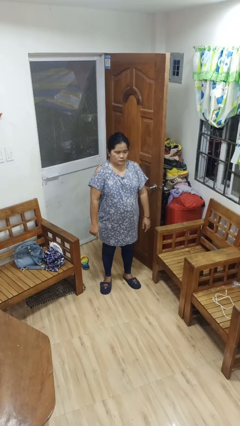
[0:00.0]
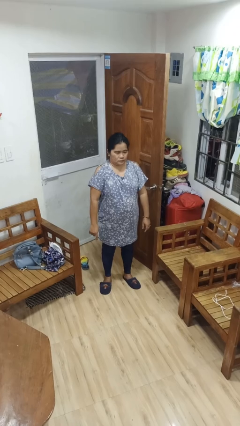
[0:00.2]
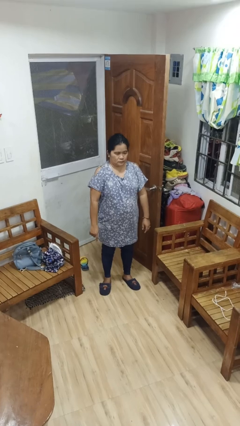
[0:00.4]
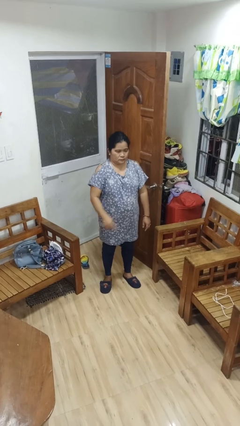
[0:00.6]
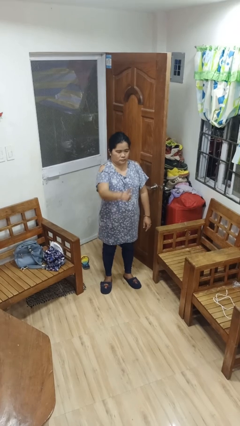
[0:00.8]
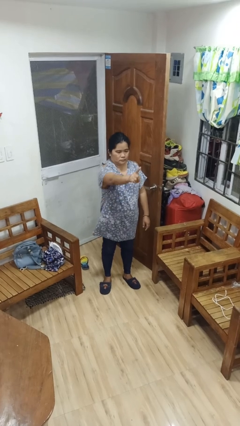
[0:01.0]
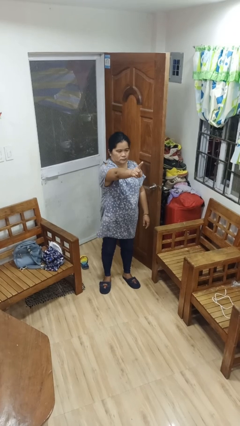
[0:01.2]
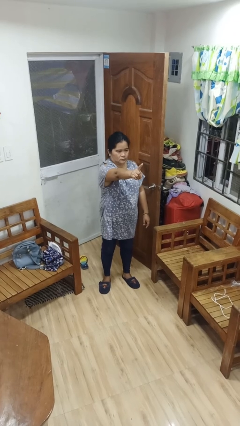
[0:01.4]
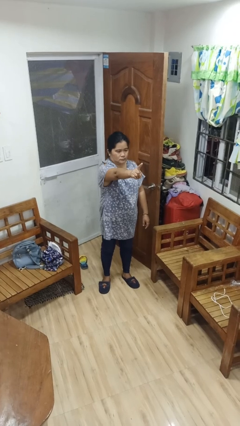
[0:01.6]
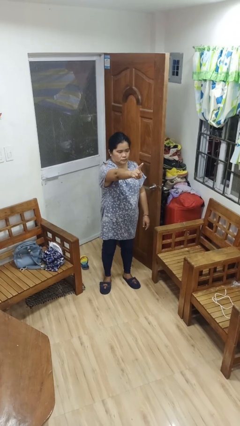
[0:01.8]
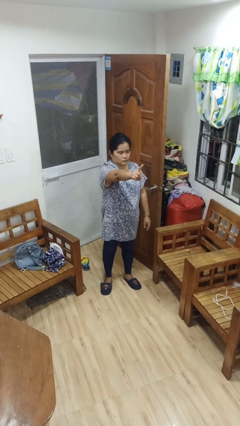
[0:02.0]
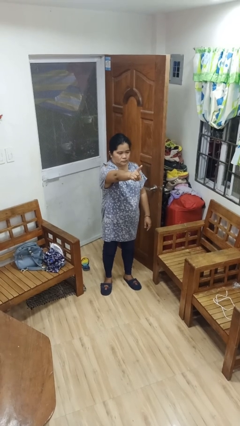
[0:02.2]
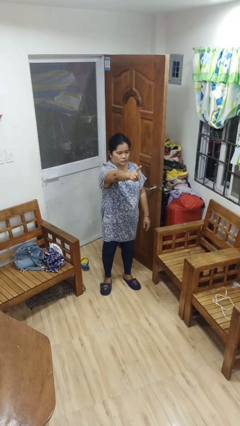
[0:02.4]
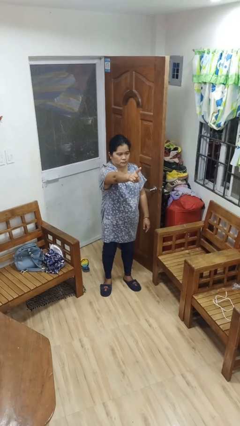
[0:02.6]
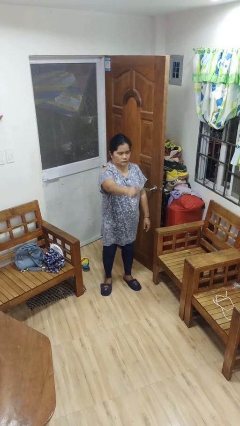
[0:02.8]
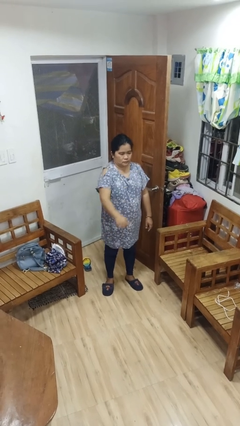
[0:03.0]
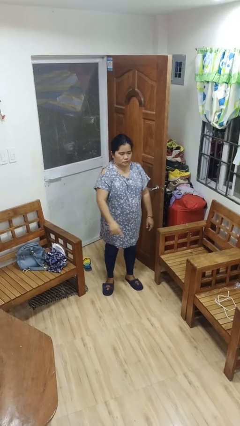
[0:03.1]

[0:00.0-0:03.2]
person gestures number one

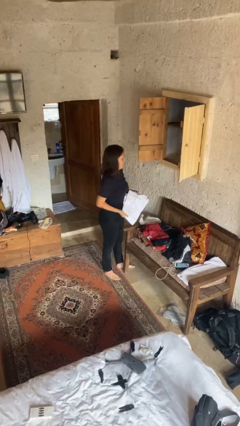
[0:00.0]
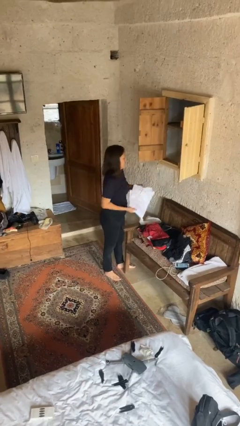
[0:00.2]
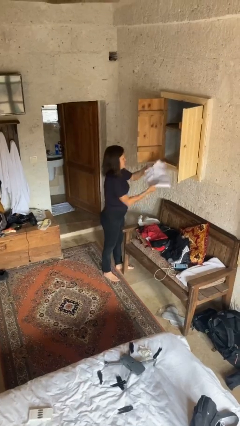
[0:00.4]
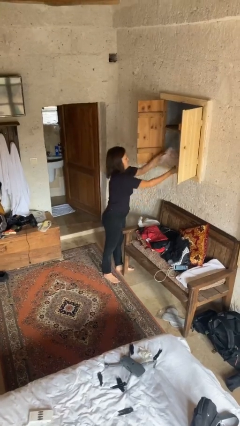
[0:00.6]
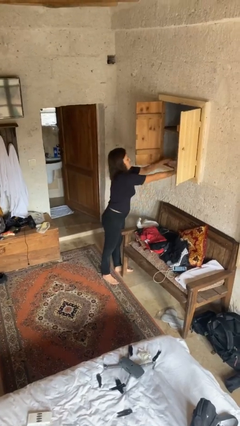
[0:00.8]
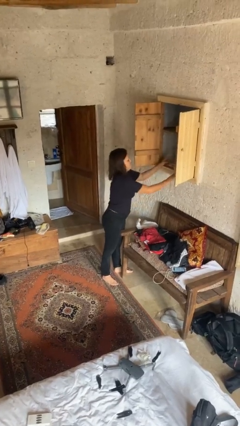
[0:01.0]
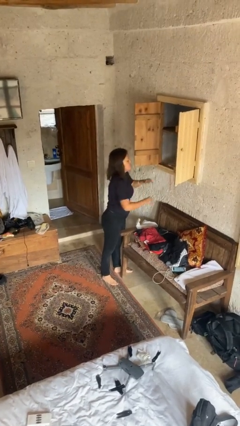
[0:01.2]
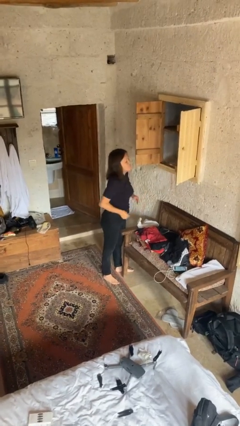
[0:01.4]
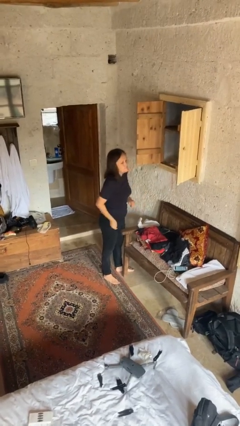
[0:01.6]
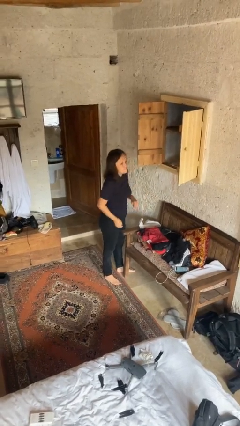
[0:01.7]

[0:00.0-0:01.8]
person puts clothes into dresser

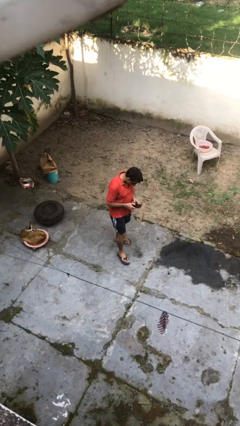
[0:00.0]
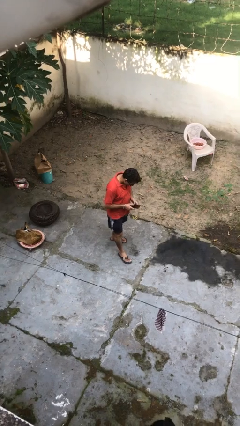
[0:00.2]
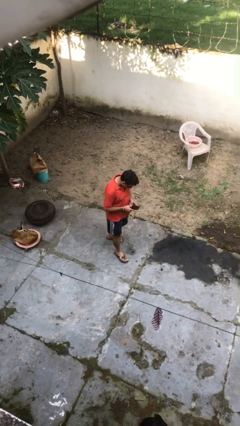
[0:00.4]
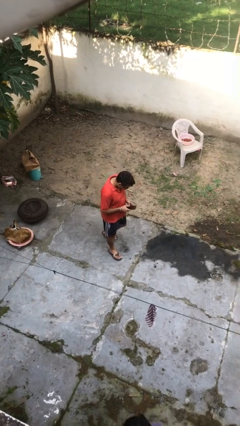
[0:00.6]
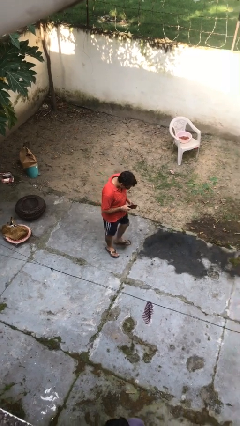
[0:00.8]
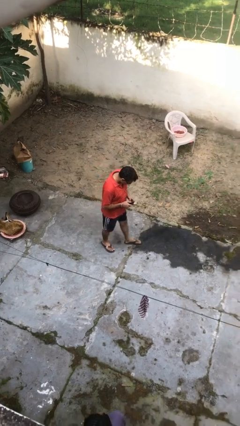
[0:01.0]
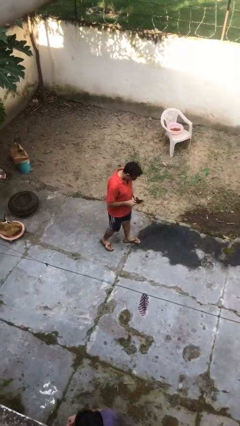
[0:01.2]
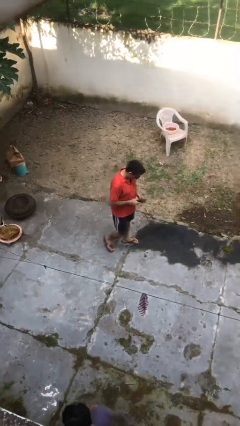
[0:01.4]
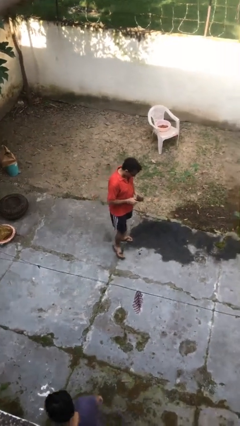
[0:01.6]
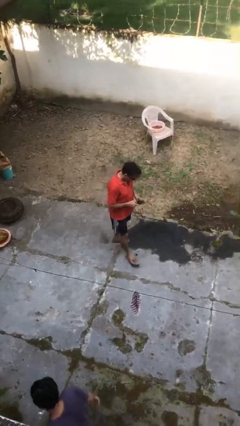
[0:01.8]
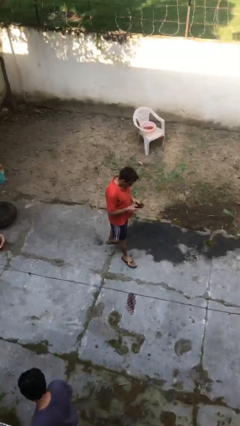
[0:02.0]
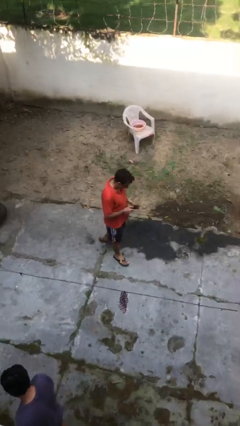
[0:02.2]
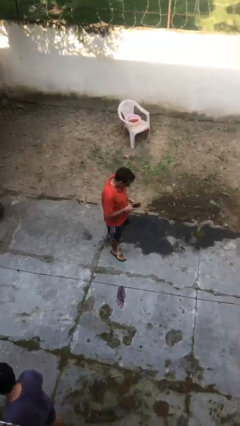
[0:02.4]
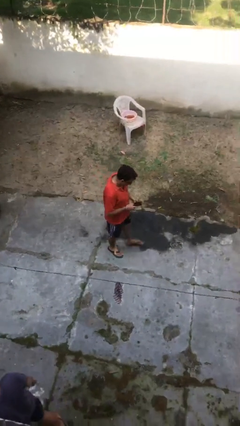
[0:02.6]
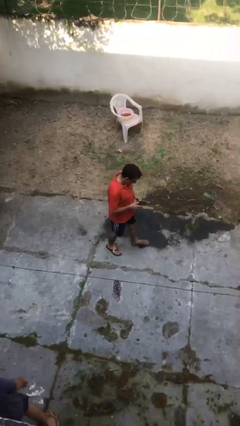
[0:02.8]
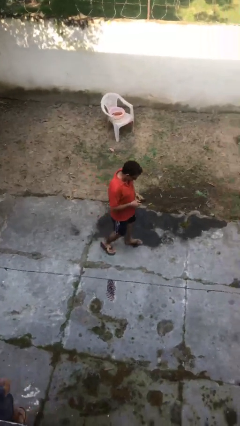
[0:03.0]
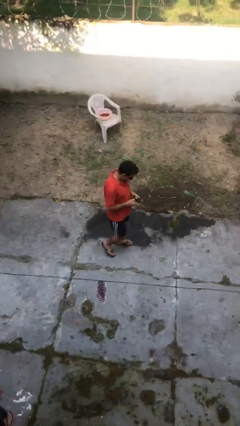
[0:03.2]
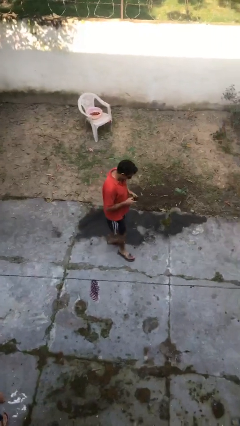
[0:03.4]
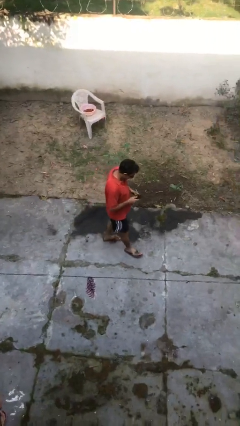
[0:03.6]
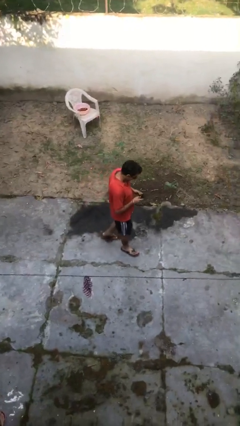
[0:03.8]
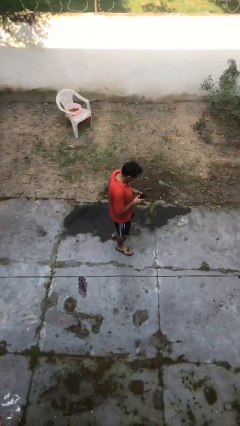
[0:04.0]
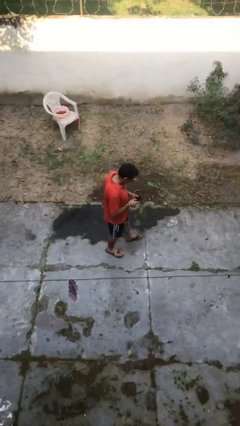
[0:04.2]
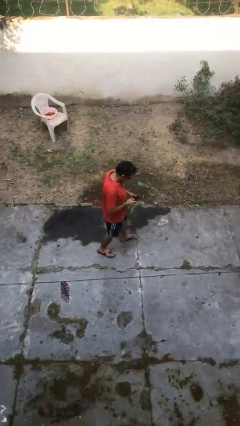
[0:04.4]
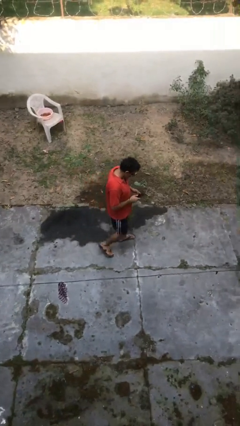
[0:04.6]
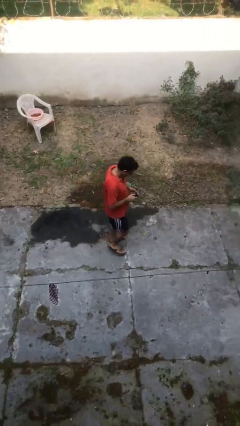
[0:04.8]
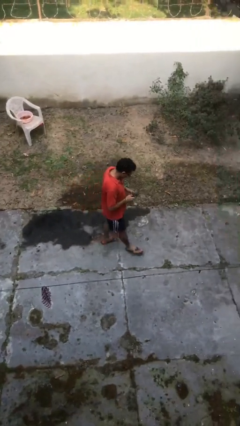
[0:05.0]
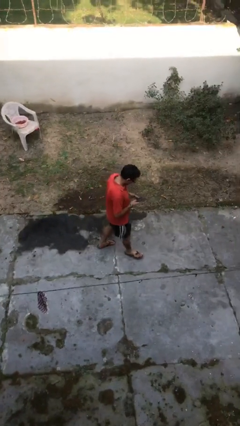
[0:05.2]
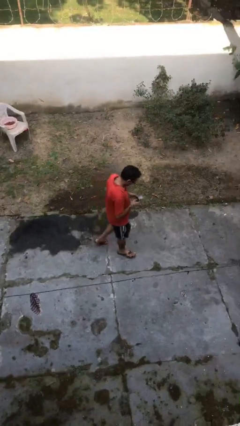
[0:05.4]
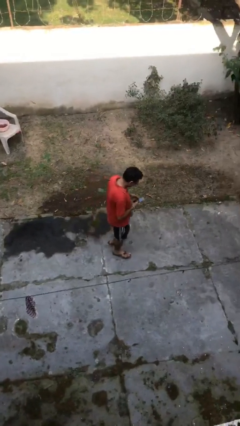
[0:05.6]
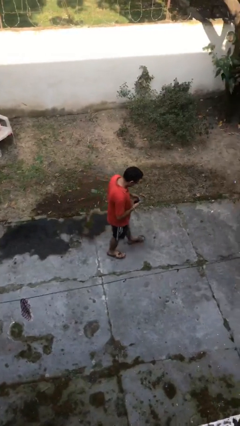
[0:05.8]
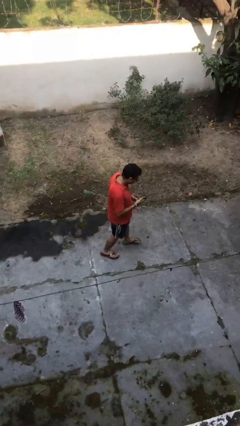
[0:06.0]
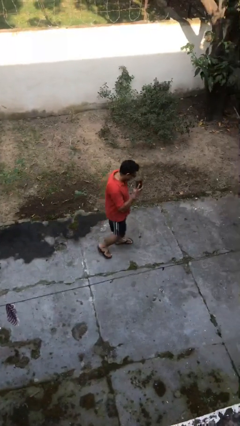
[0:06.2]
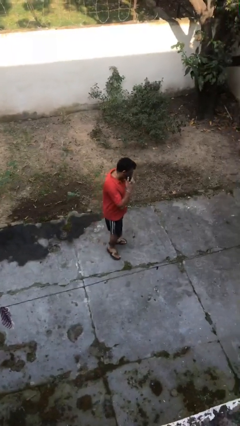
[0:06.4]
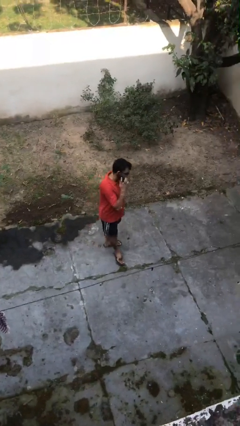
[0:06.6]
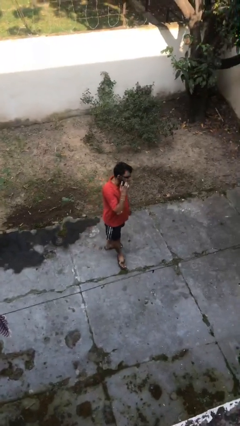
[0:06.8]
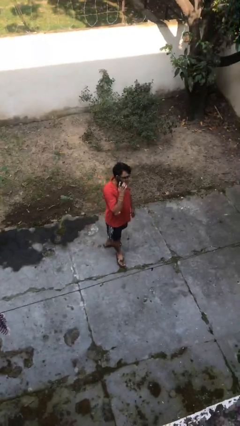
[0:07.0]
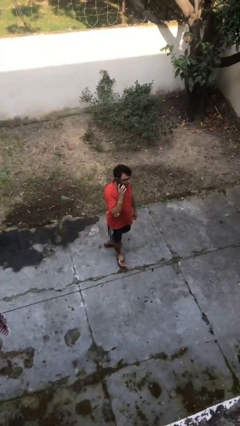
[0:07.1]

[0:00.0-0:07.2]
person texts on phone

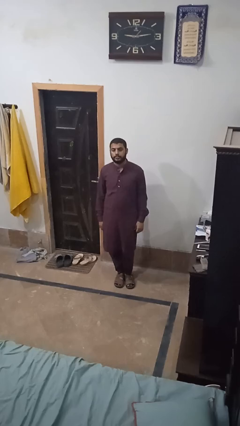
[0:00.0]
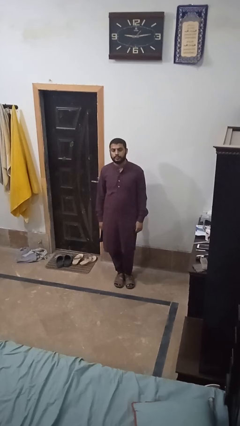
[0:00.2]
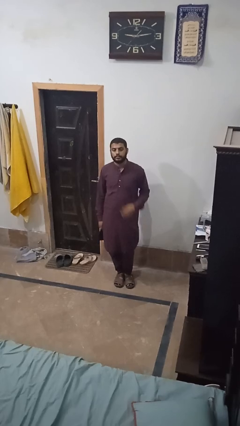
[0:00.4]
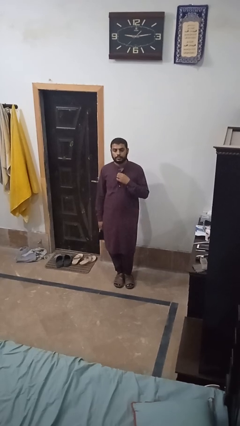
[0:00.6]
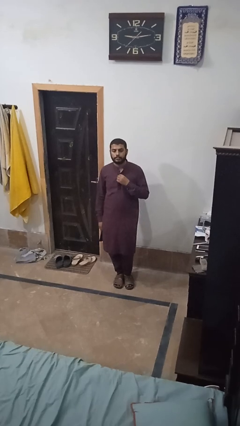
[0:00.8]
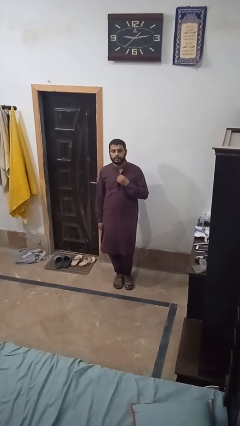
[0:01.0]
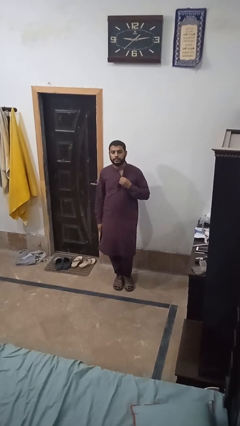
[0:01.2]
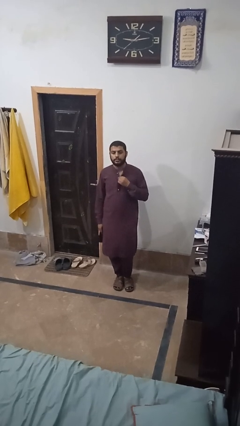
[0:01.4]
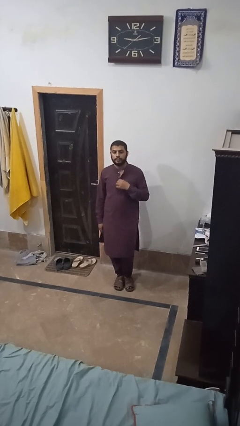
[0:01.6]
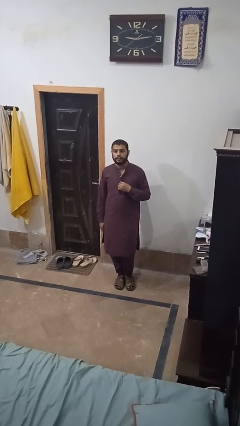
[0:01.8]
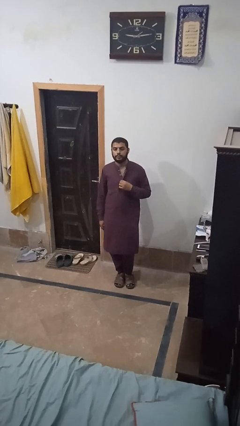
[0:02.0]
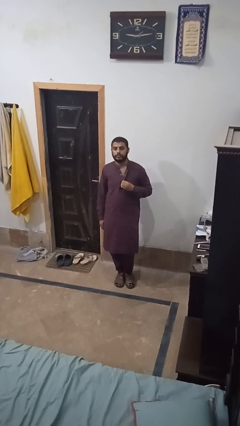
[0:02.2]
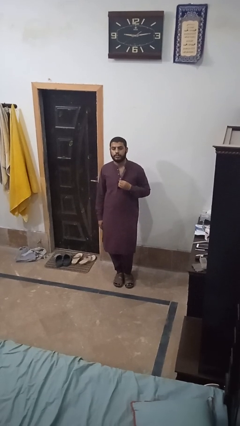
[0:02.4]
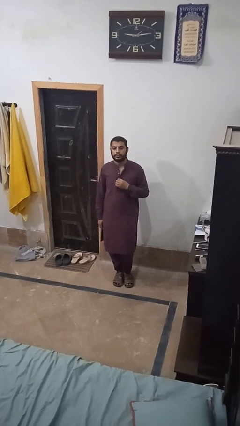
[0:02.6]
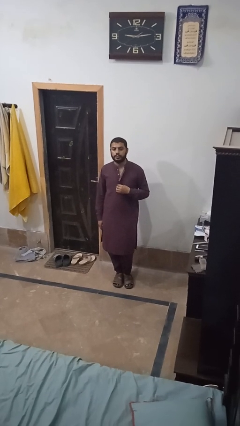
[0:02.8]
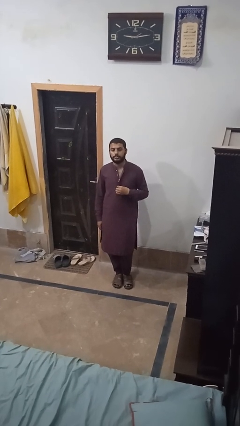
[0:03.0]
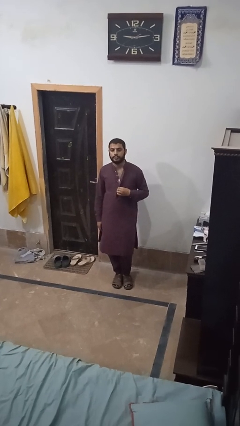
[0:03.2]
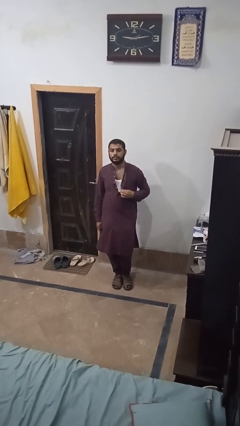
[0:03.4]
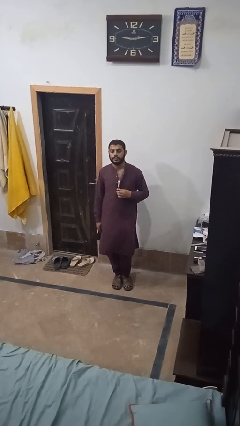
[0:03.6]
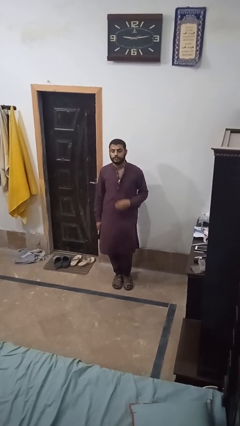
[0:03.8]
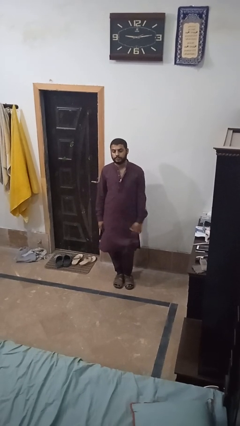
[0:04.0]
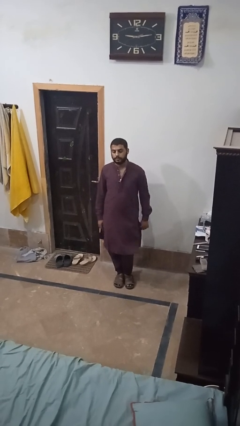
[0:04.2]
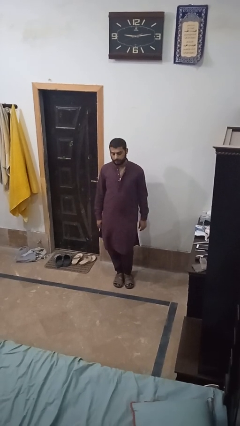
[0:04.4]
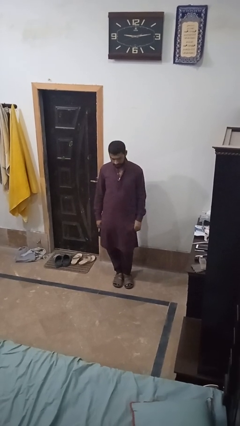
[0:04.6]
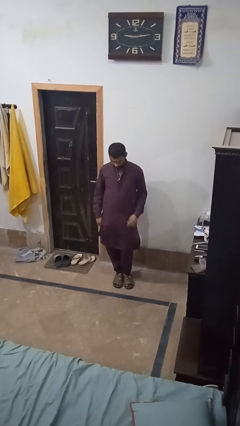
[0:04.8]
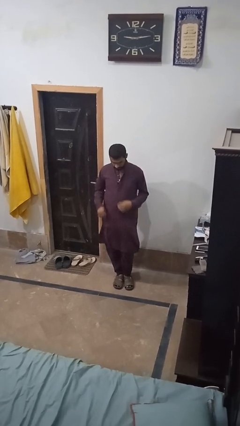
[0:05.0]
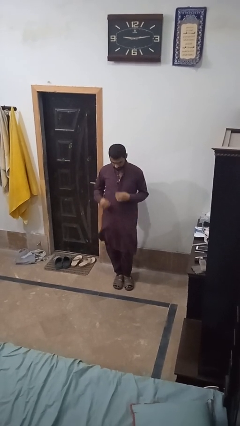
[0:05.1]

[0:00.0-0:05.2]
person unbuttons shirt

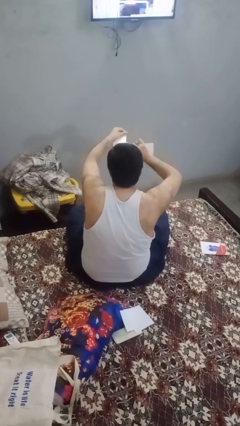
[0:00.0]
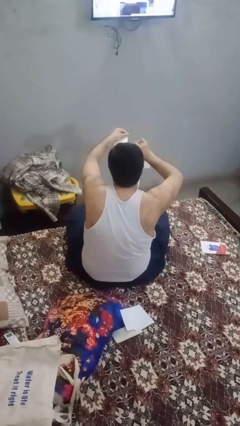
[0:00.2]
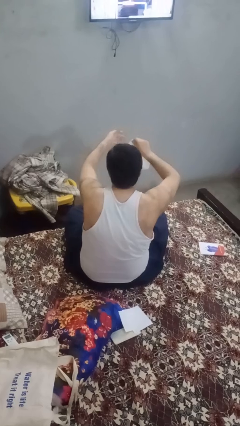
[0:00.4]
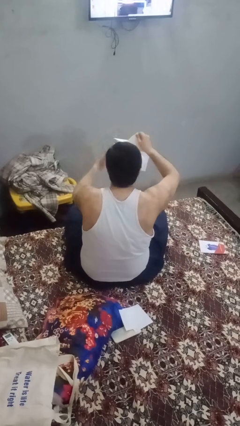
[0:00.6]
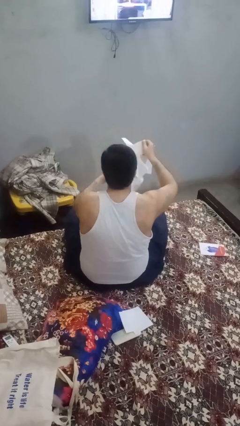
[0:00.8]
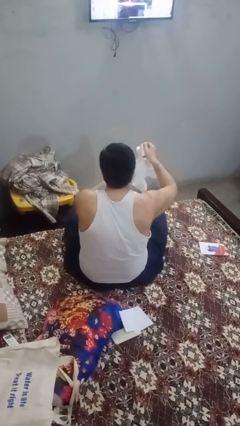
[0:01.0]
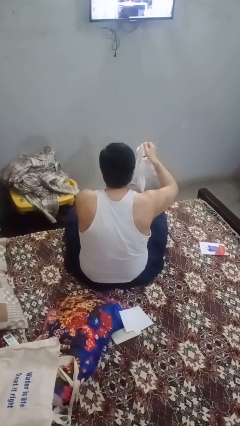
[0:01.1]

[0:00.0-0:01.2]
person tears paper
